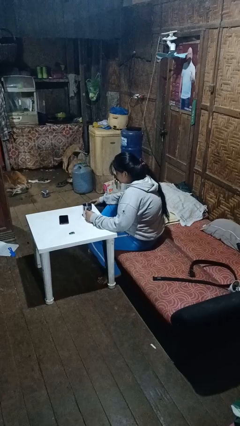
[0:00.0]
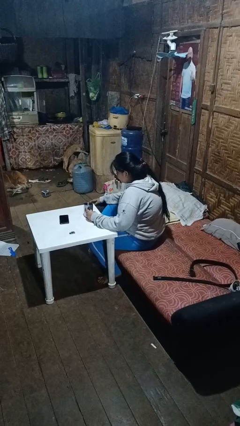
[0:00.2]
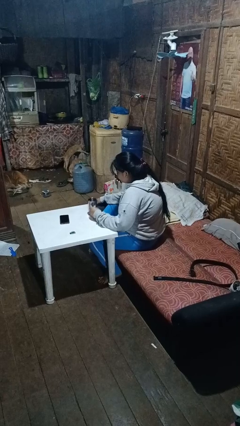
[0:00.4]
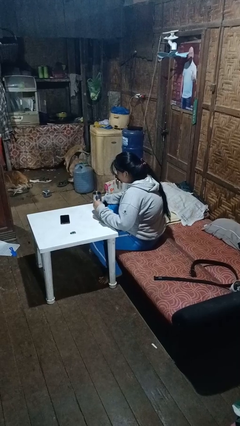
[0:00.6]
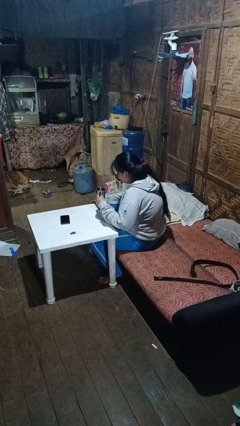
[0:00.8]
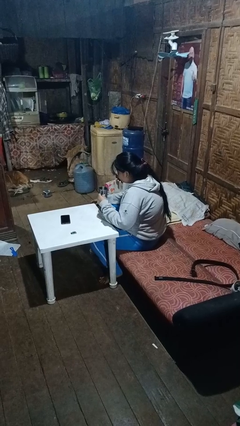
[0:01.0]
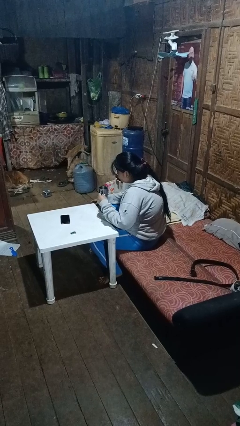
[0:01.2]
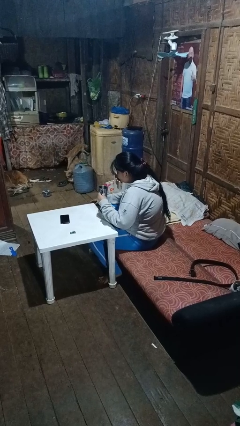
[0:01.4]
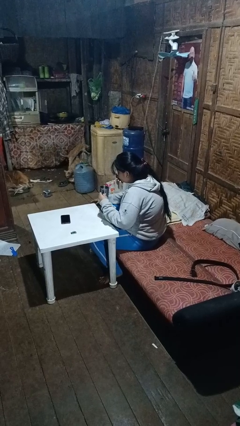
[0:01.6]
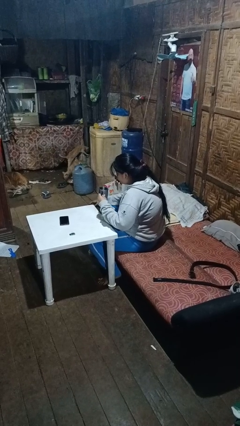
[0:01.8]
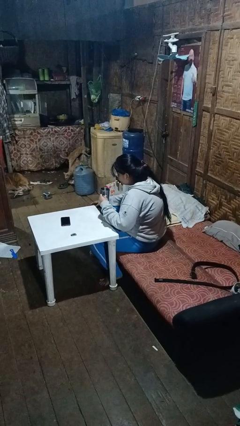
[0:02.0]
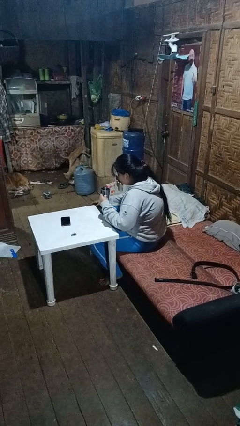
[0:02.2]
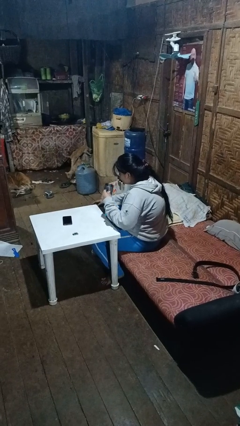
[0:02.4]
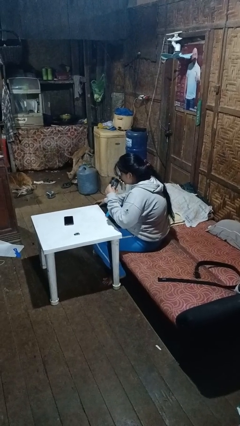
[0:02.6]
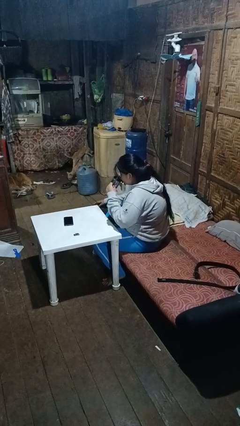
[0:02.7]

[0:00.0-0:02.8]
person picks up object from table

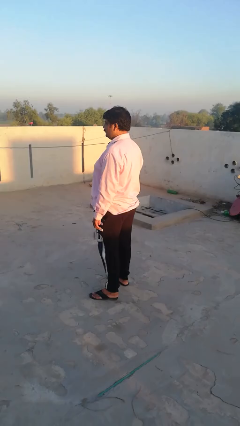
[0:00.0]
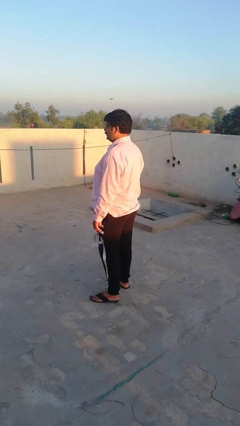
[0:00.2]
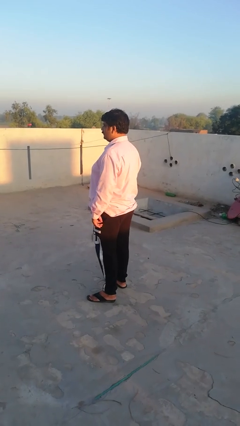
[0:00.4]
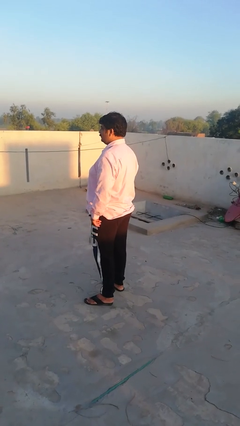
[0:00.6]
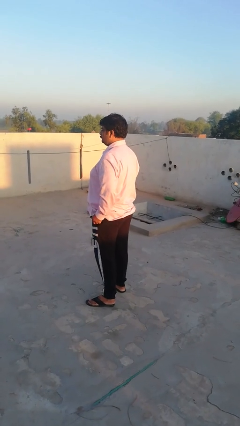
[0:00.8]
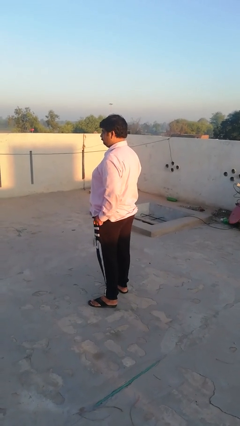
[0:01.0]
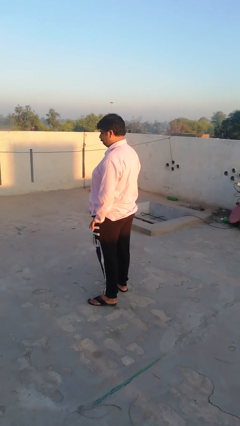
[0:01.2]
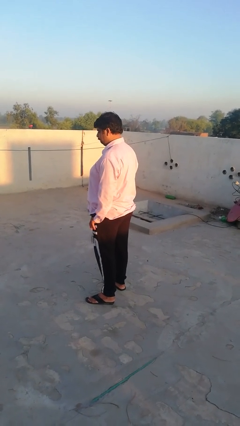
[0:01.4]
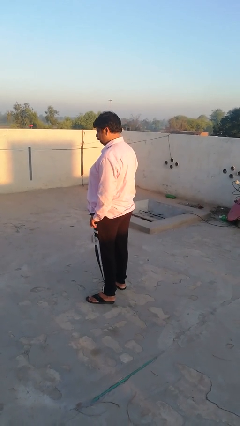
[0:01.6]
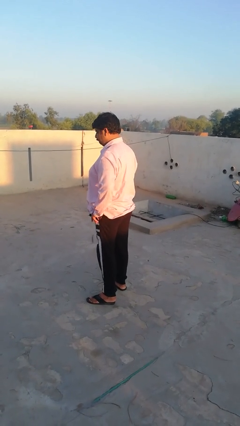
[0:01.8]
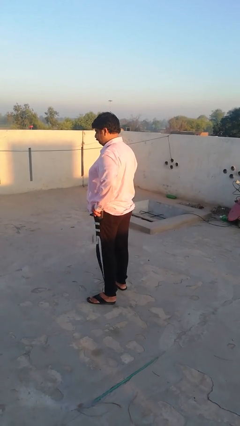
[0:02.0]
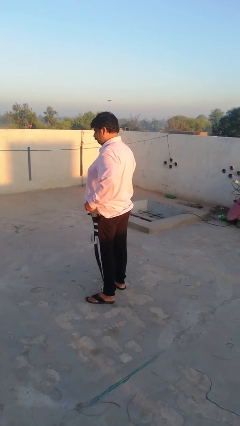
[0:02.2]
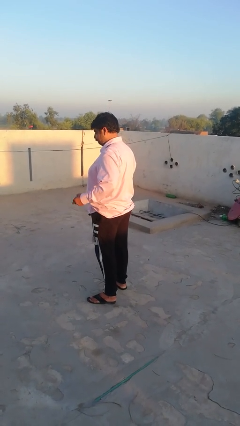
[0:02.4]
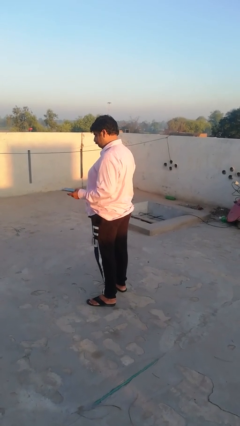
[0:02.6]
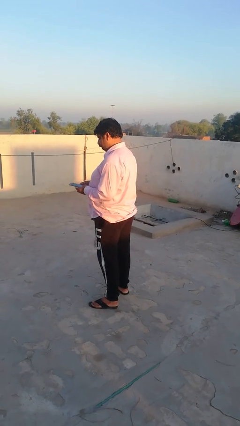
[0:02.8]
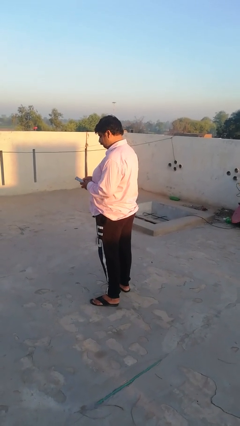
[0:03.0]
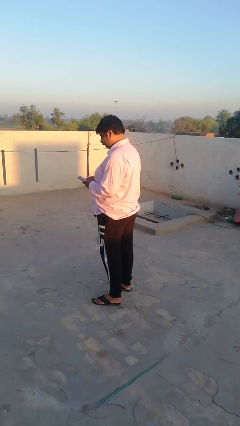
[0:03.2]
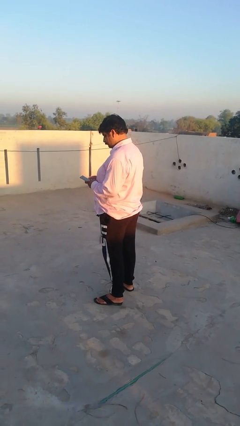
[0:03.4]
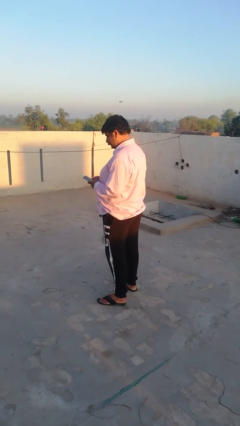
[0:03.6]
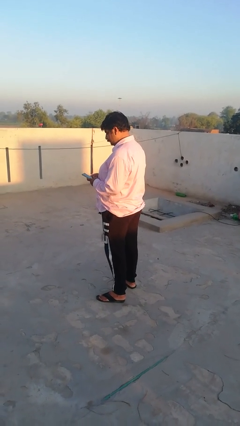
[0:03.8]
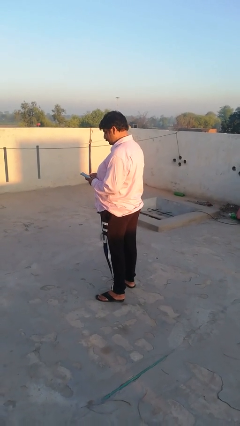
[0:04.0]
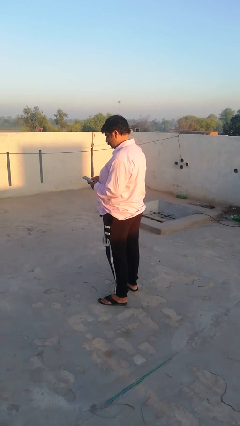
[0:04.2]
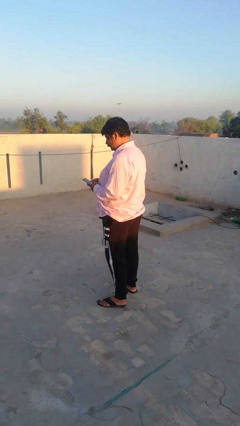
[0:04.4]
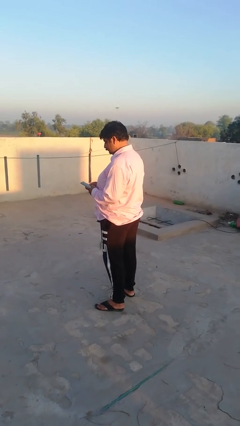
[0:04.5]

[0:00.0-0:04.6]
person takes phone from pocket

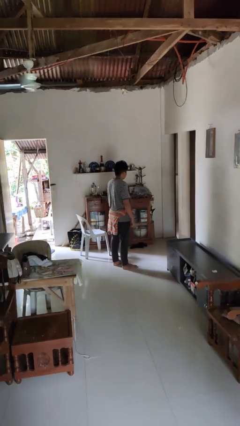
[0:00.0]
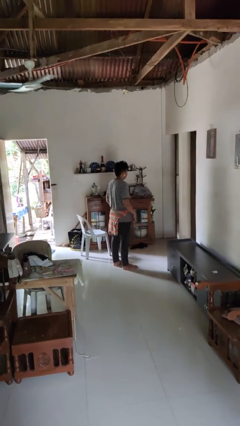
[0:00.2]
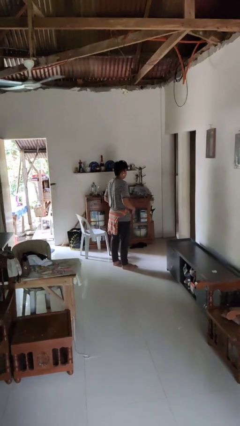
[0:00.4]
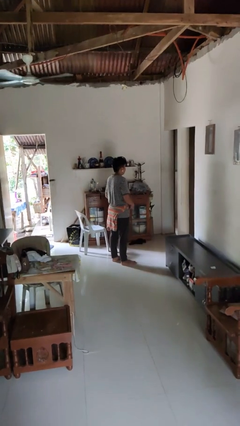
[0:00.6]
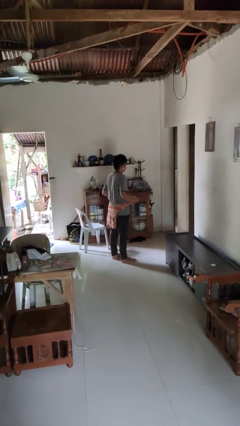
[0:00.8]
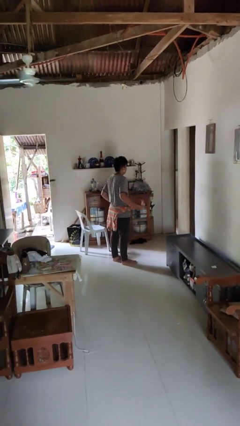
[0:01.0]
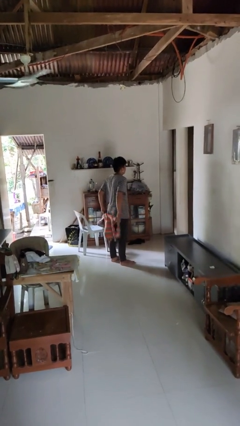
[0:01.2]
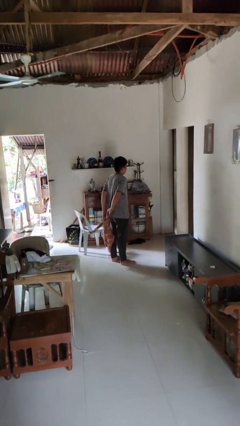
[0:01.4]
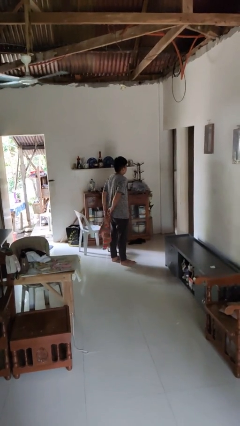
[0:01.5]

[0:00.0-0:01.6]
person unties jacket around waist

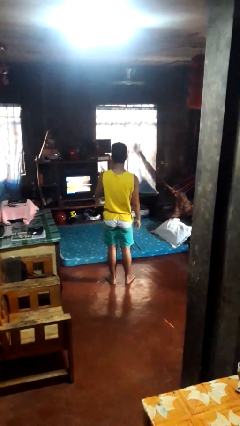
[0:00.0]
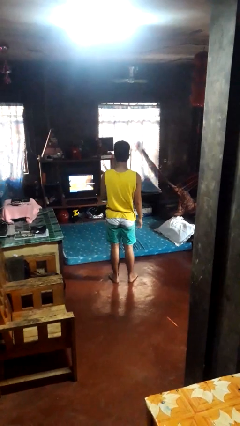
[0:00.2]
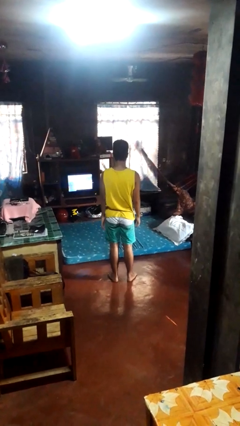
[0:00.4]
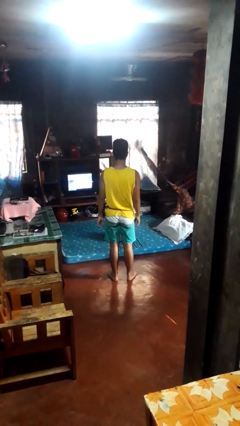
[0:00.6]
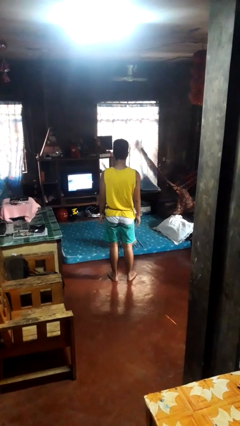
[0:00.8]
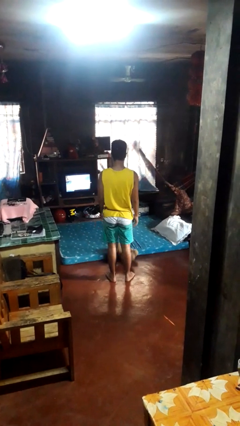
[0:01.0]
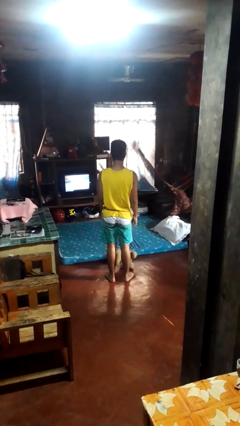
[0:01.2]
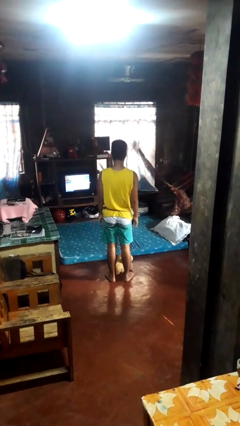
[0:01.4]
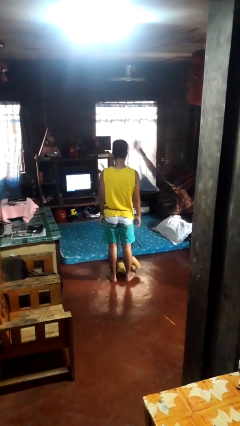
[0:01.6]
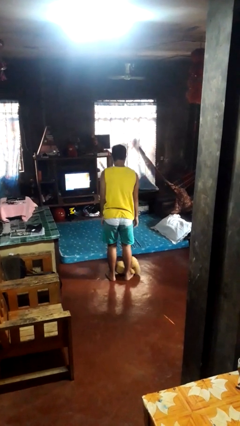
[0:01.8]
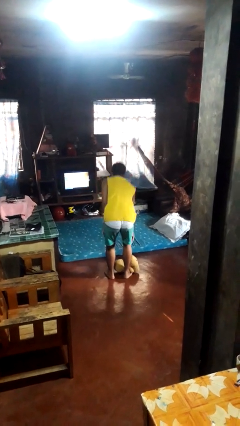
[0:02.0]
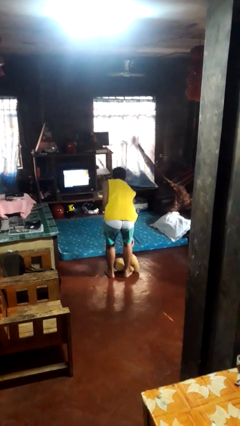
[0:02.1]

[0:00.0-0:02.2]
person throws object on bed

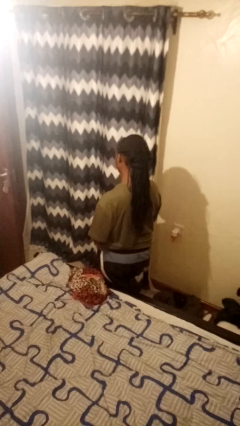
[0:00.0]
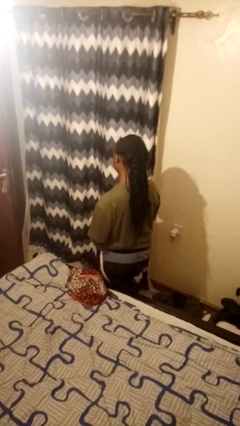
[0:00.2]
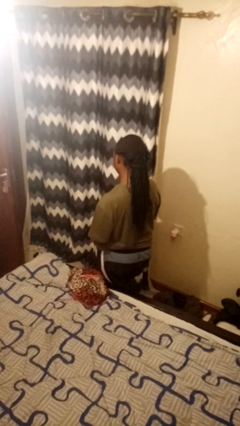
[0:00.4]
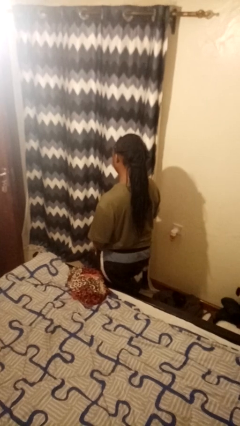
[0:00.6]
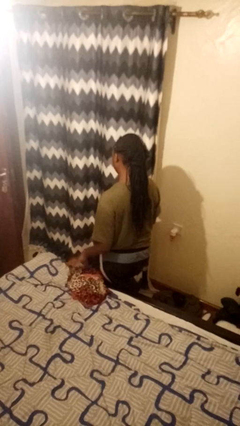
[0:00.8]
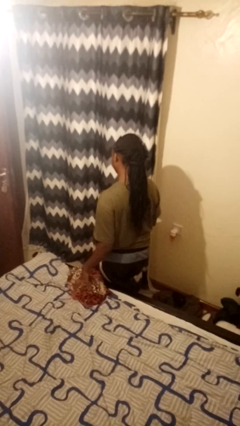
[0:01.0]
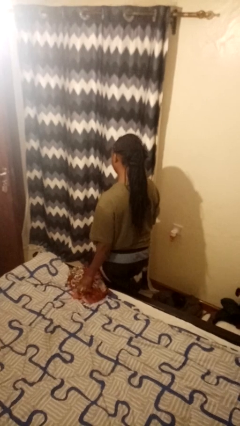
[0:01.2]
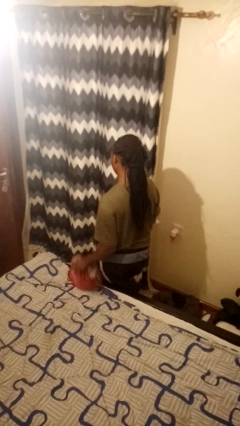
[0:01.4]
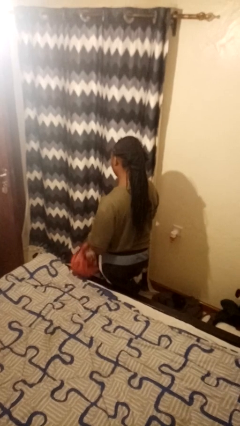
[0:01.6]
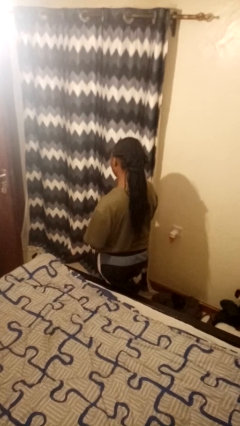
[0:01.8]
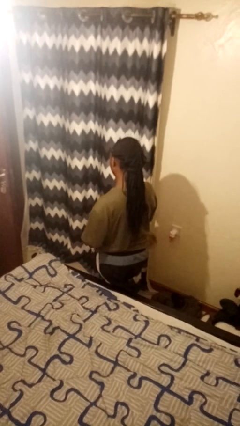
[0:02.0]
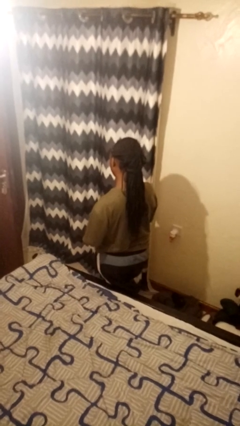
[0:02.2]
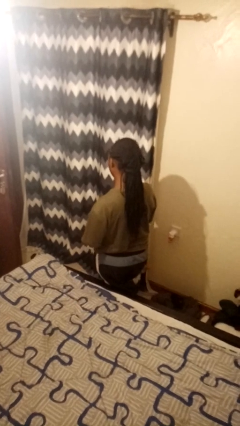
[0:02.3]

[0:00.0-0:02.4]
person picks up object from bed

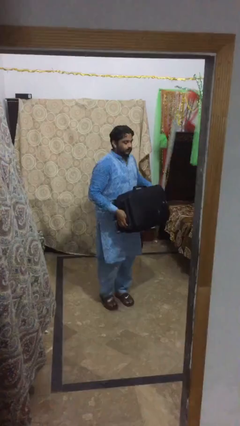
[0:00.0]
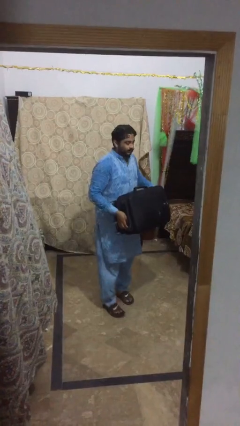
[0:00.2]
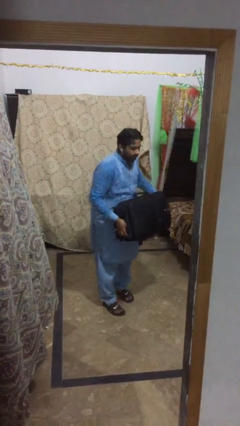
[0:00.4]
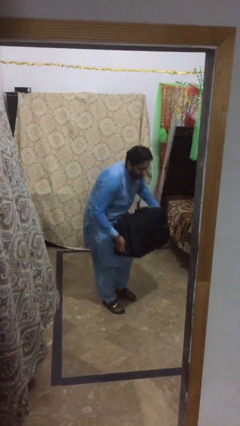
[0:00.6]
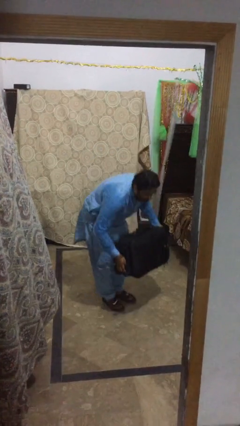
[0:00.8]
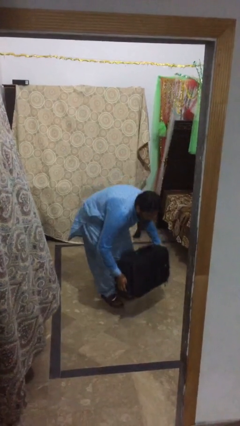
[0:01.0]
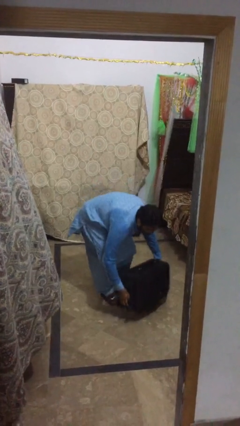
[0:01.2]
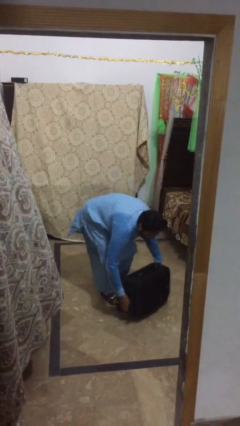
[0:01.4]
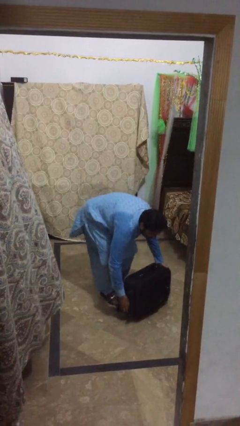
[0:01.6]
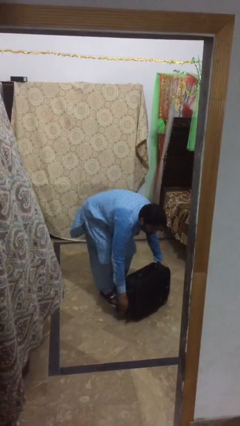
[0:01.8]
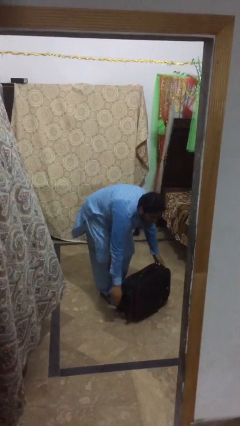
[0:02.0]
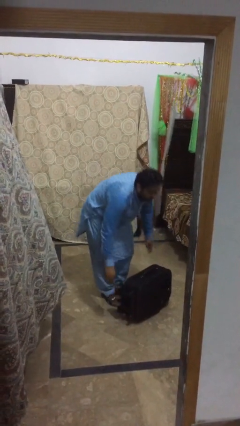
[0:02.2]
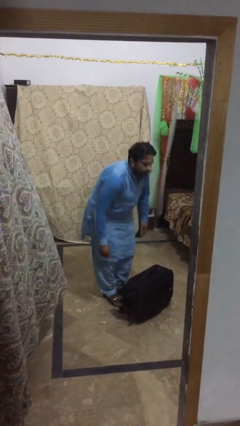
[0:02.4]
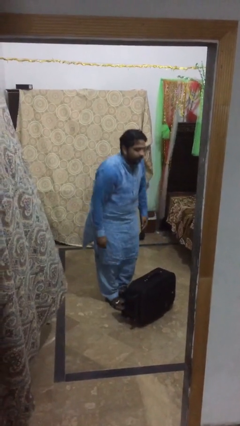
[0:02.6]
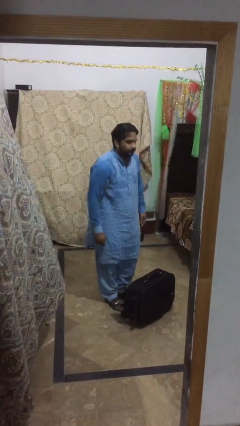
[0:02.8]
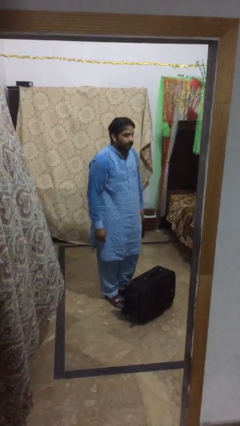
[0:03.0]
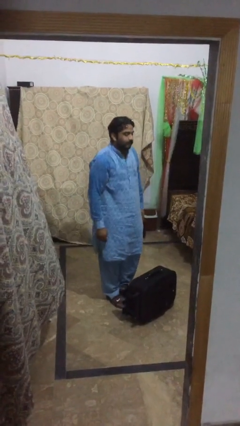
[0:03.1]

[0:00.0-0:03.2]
person puts down object on floor

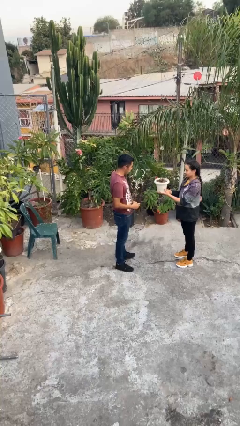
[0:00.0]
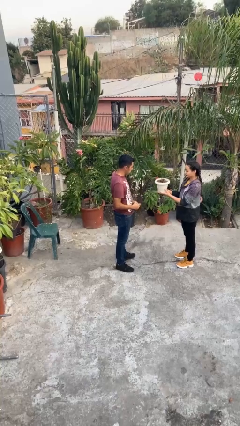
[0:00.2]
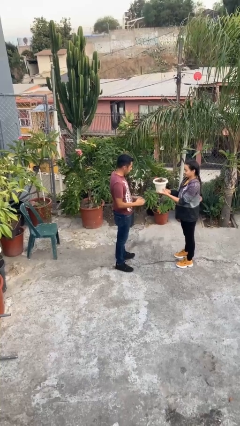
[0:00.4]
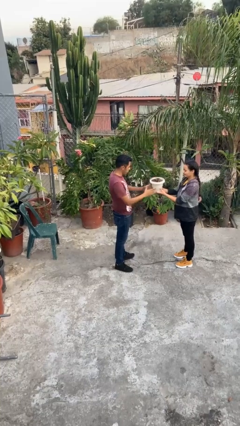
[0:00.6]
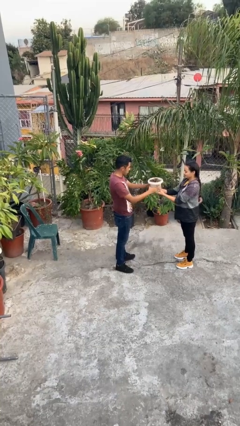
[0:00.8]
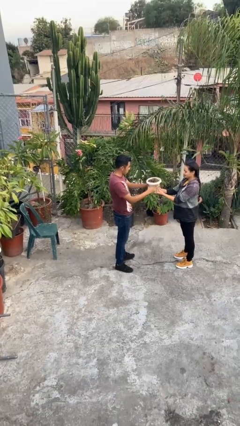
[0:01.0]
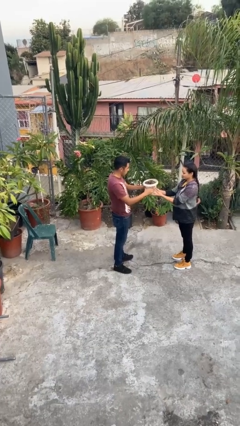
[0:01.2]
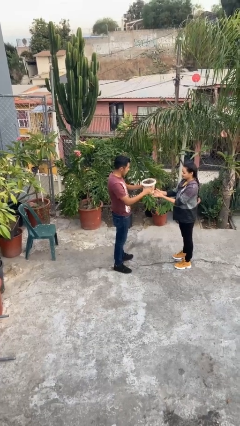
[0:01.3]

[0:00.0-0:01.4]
person transfers object to person
